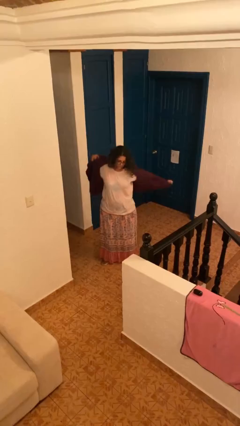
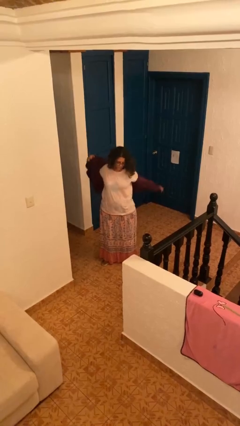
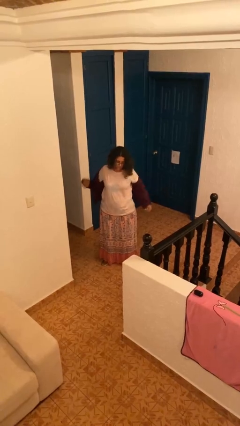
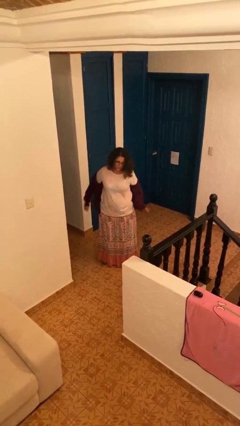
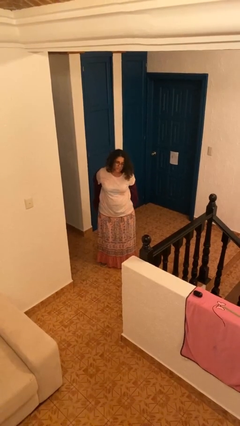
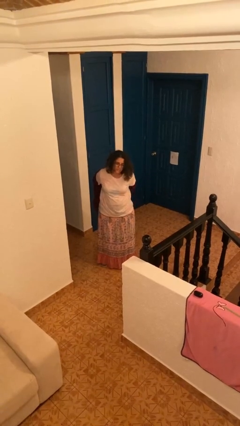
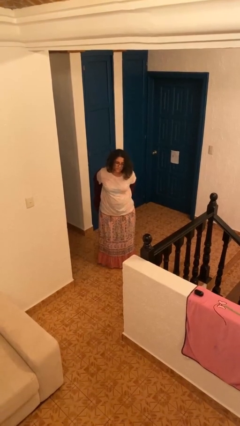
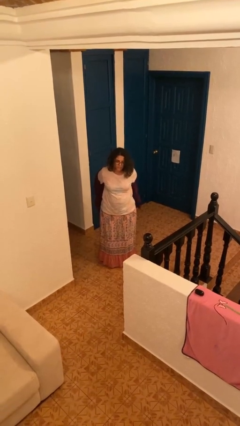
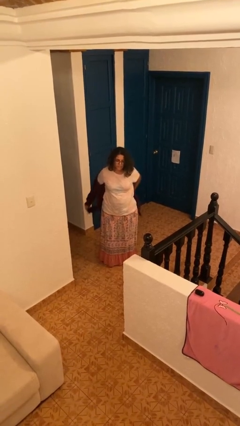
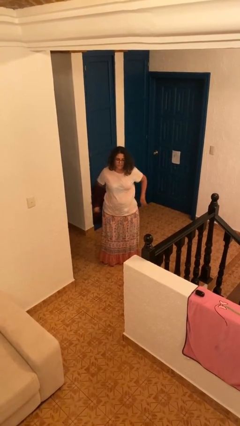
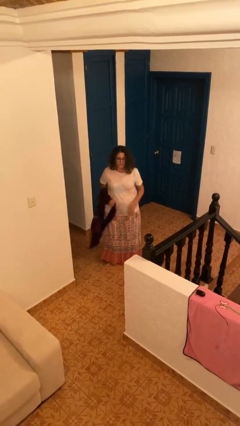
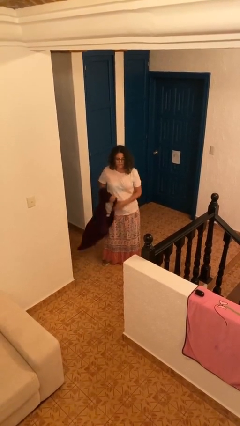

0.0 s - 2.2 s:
person takes off jacket

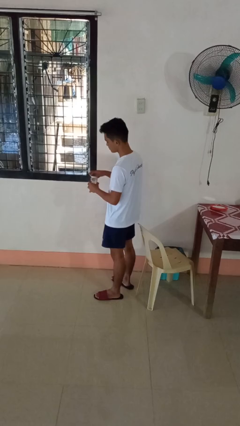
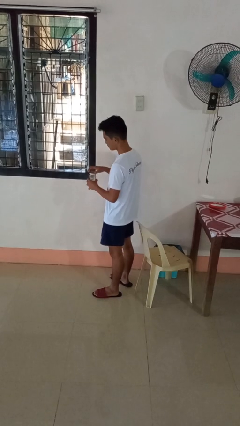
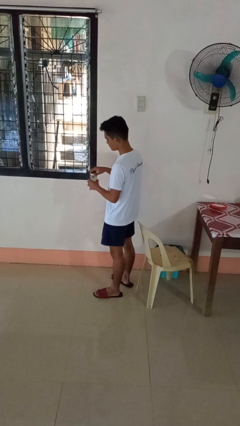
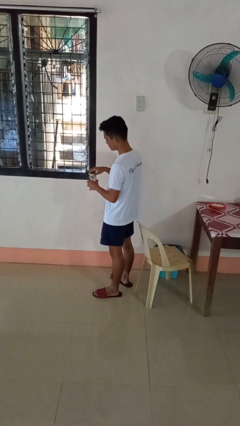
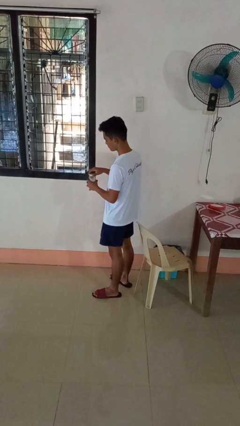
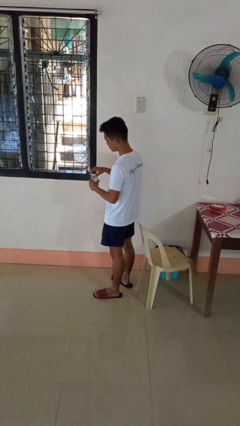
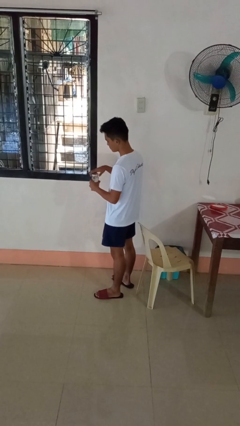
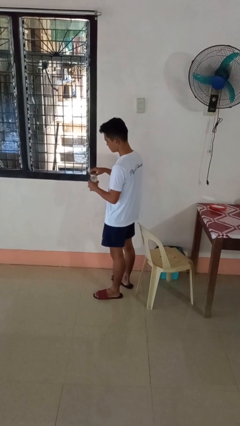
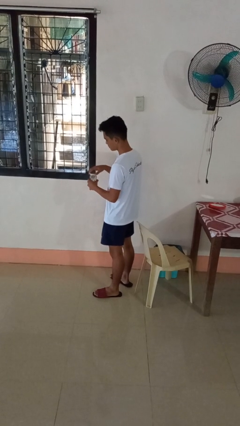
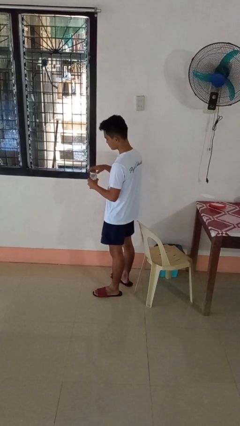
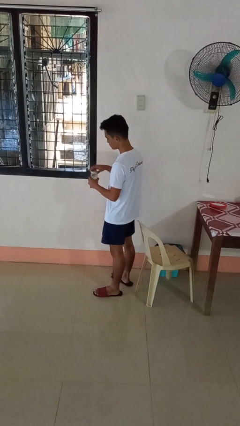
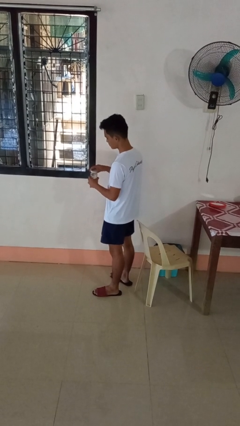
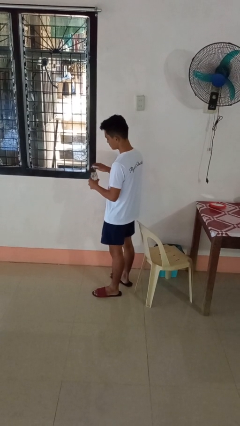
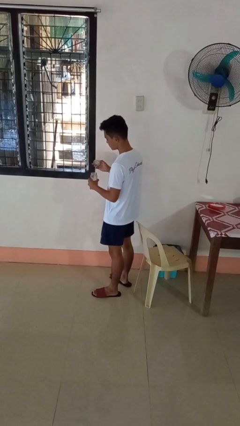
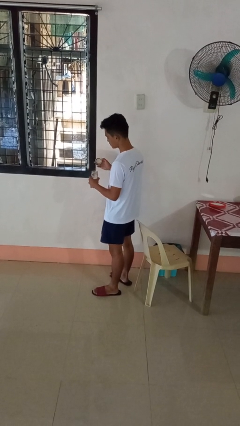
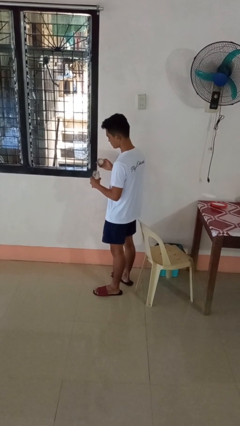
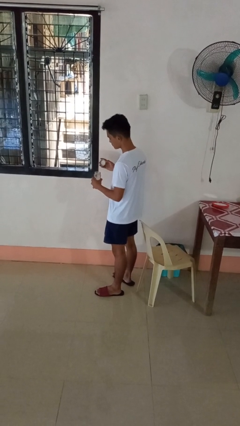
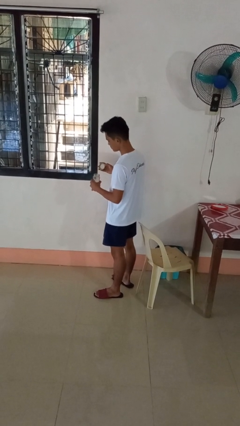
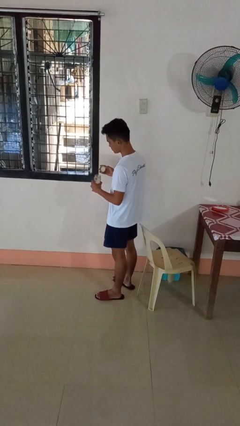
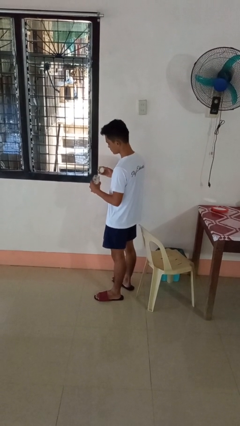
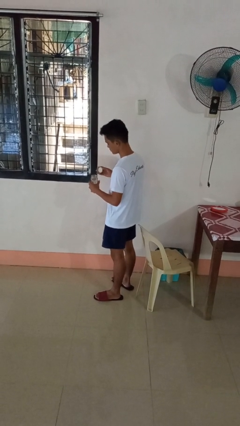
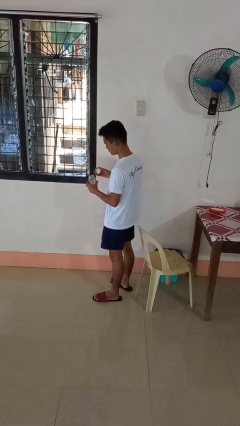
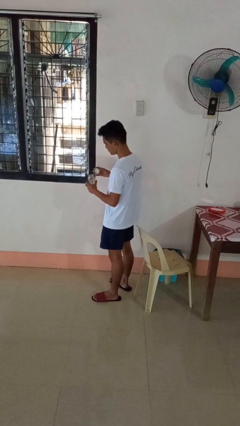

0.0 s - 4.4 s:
person opens jar

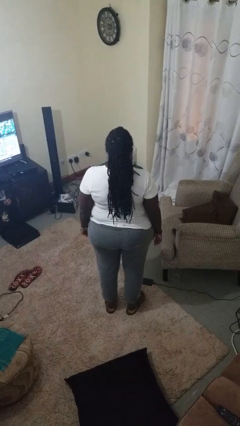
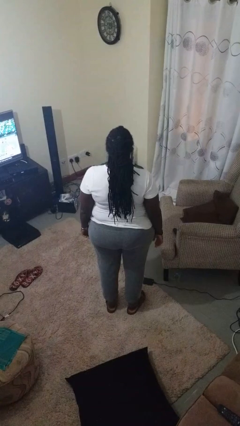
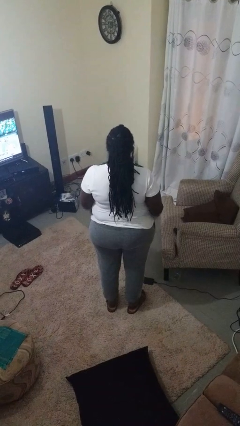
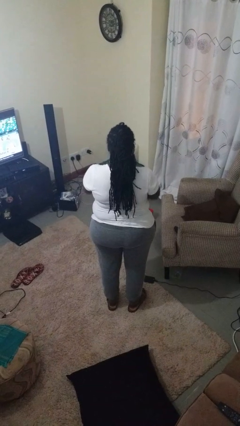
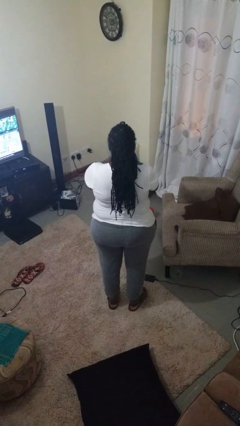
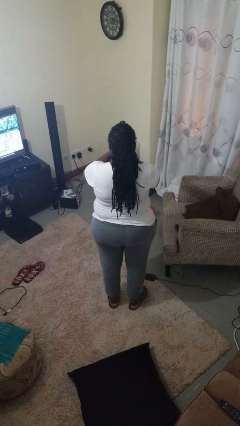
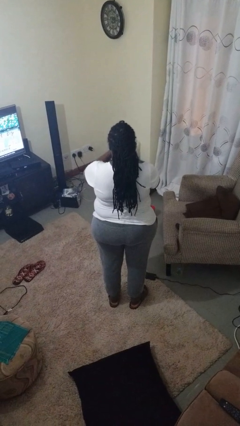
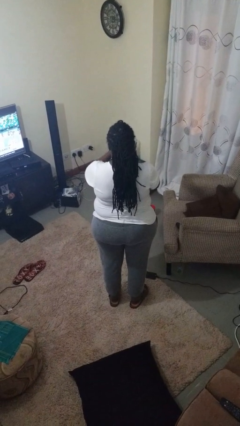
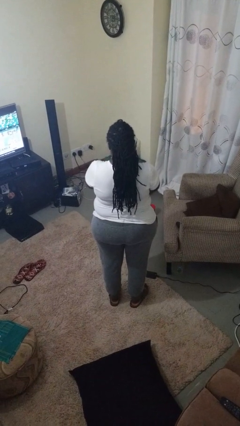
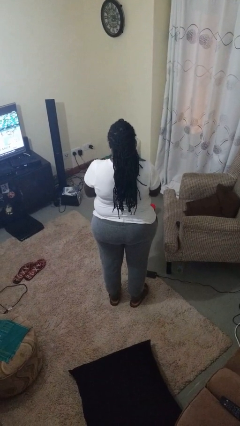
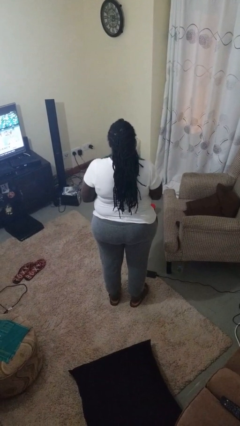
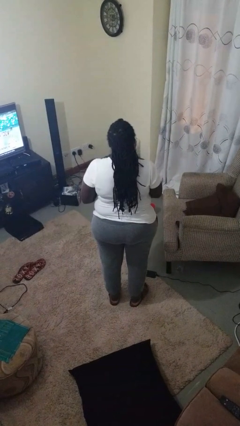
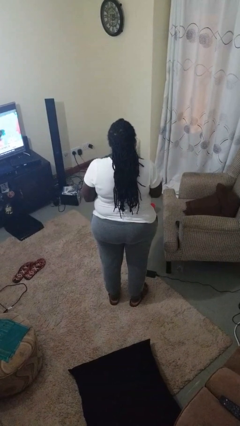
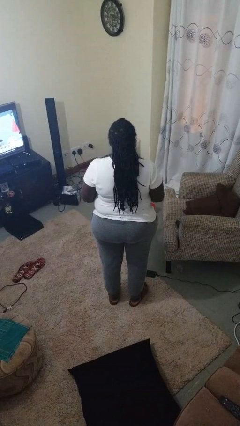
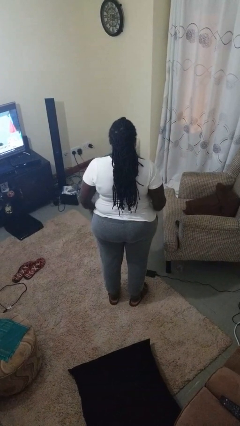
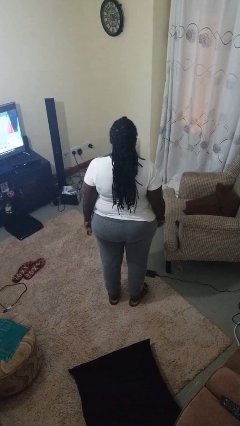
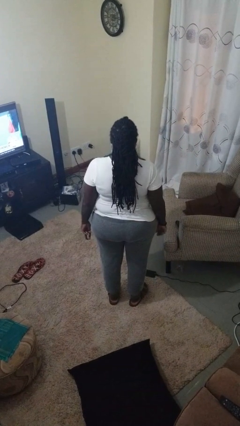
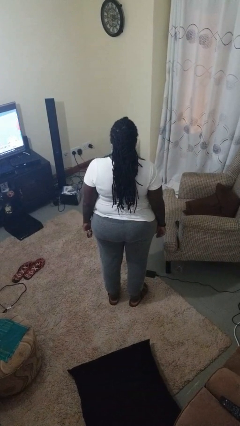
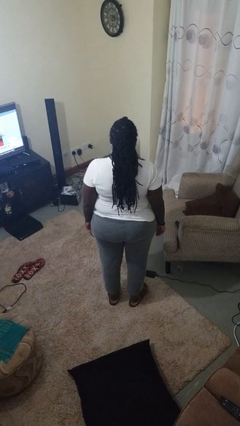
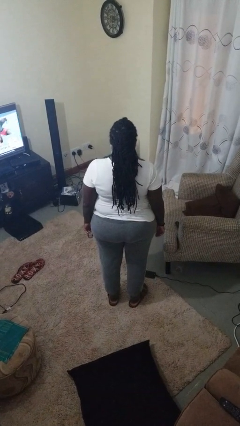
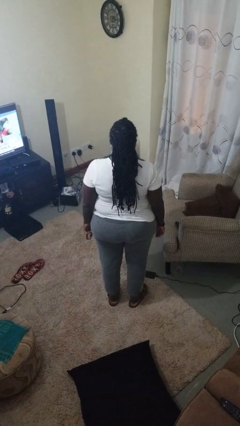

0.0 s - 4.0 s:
person takes off wristwatch

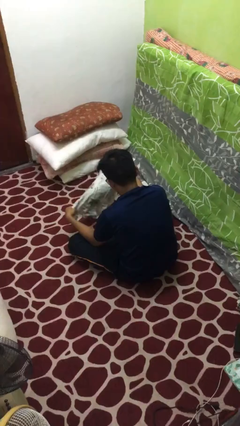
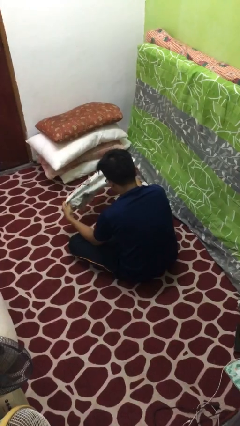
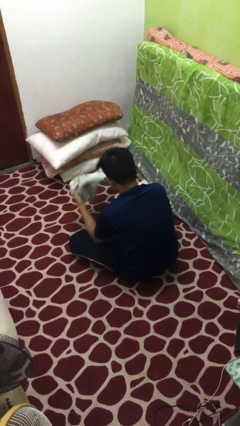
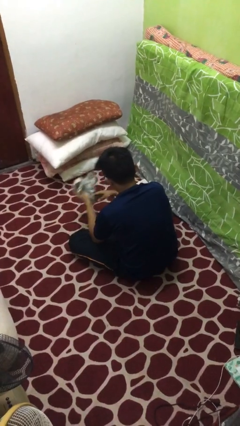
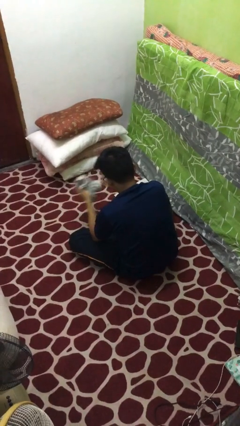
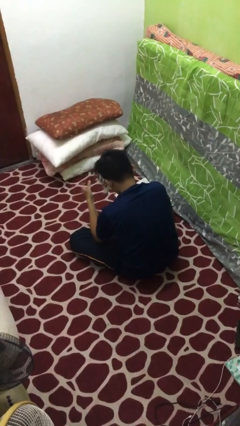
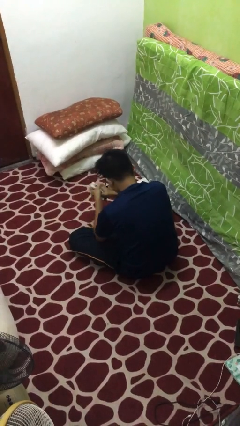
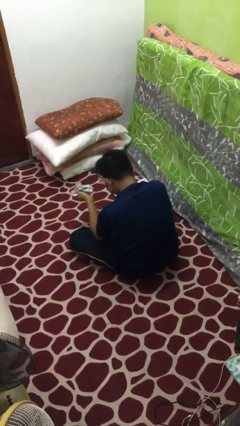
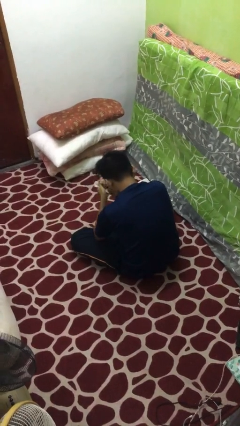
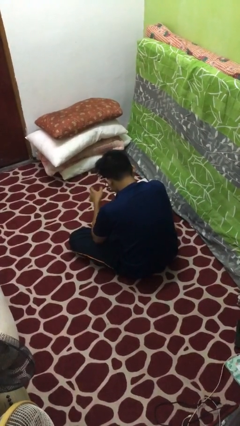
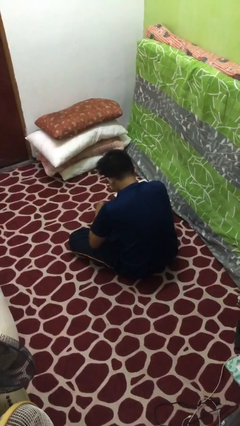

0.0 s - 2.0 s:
person crumples paper

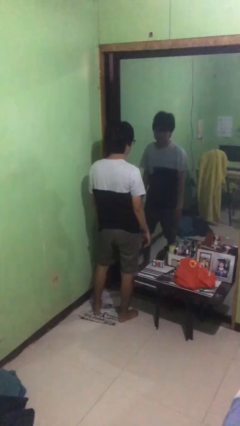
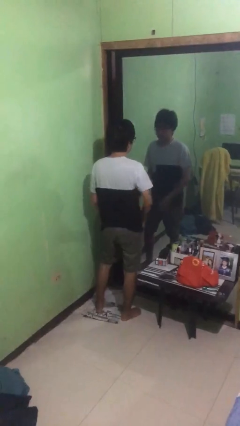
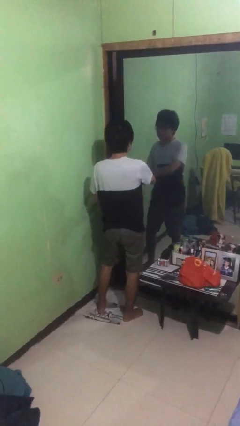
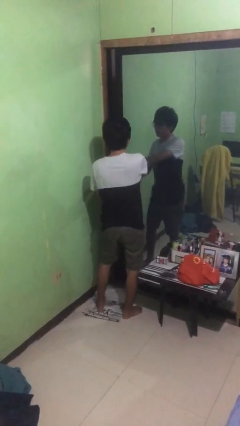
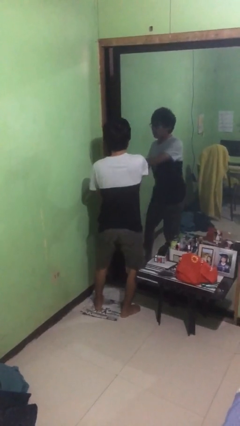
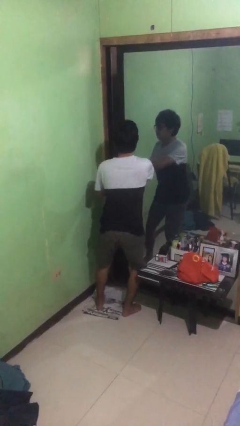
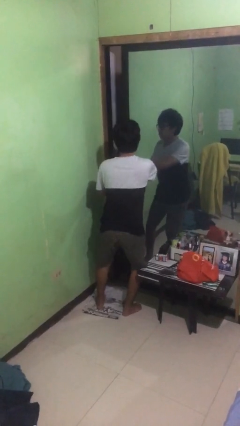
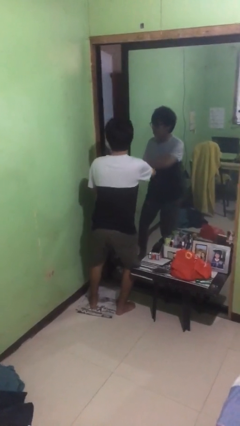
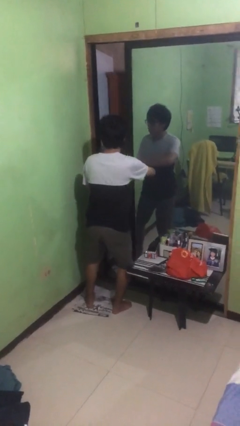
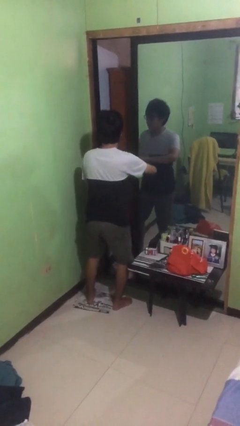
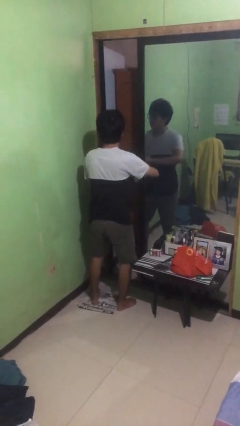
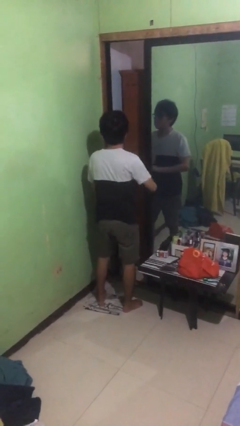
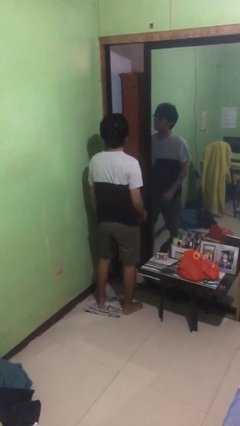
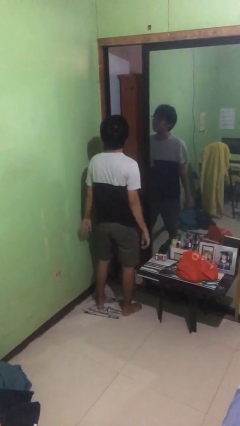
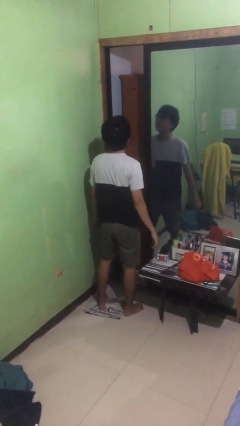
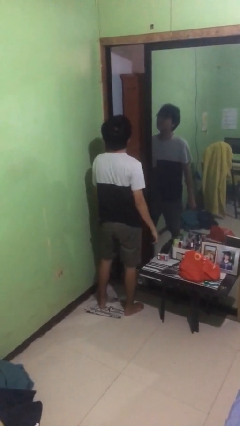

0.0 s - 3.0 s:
person opens sliding door

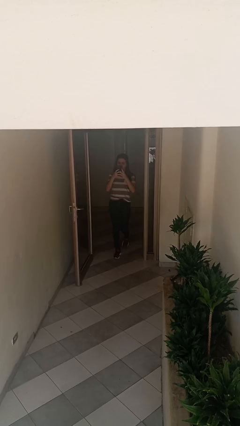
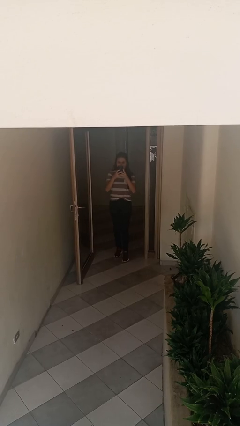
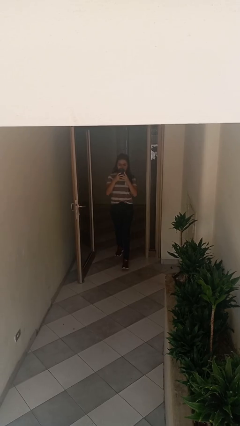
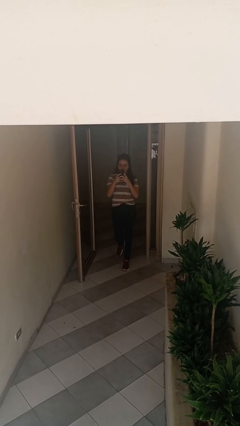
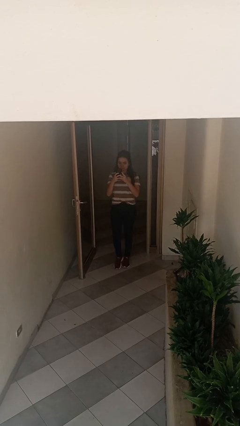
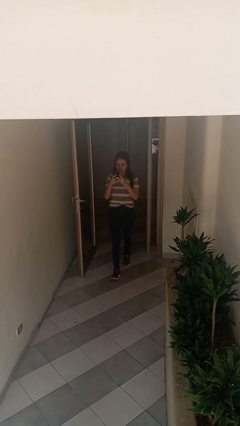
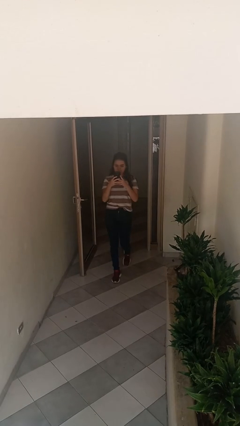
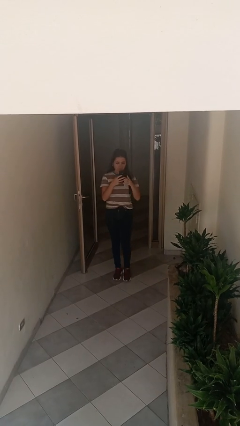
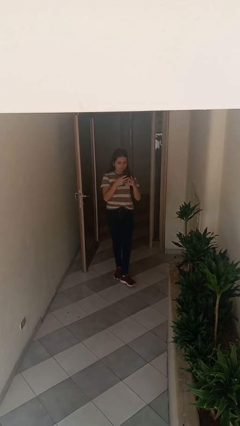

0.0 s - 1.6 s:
person enters scene through structure

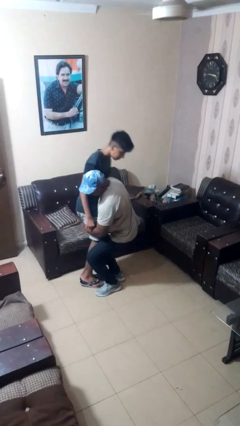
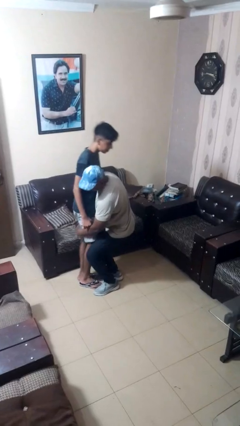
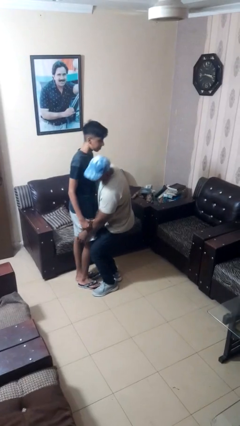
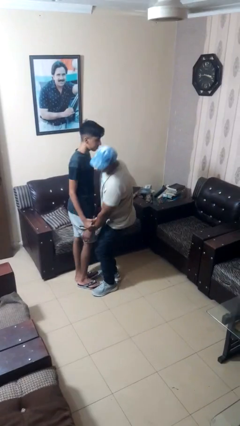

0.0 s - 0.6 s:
person puts down person
